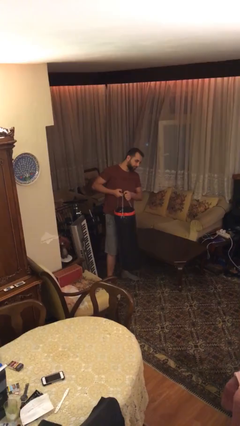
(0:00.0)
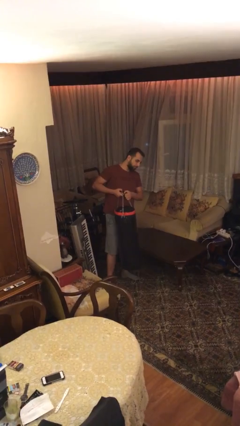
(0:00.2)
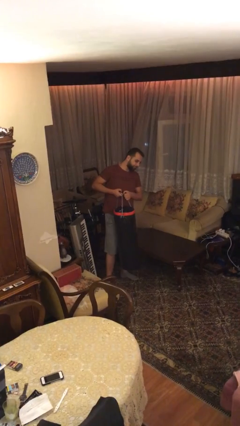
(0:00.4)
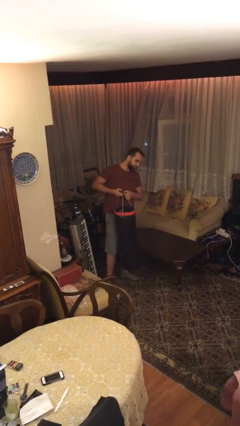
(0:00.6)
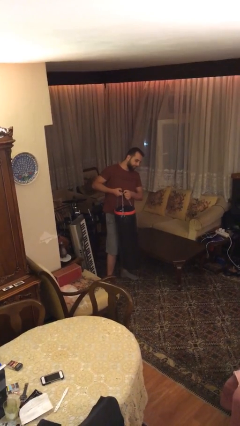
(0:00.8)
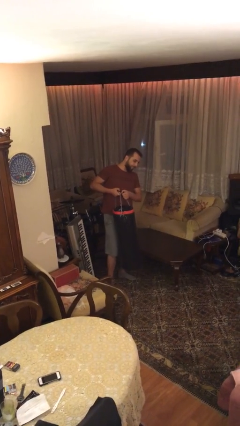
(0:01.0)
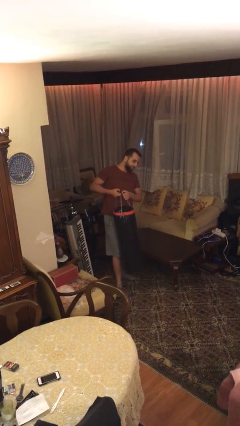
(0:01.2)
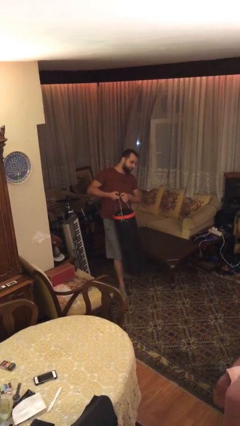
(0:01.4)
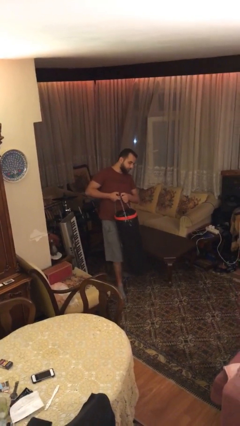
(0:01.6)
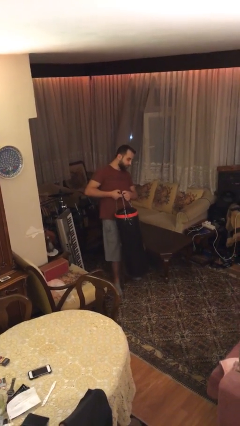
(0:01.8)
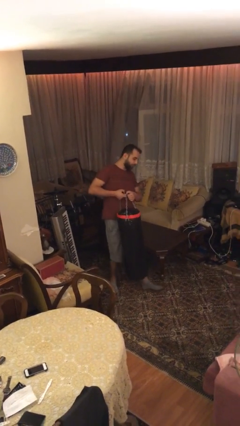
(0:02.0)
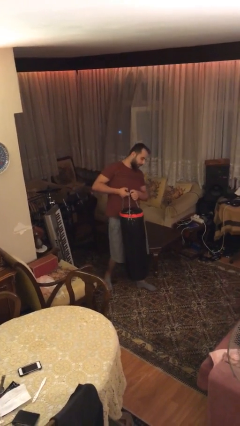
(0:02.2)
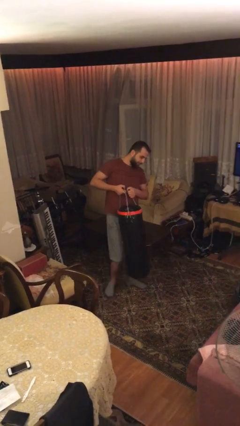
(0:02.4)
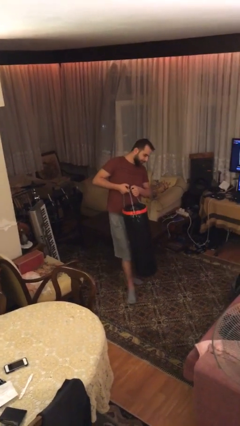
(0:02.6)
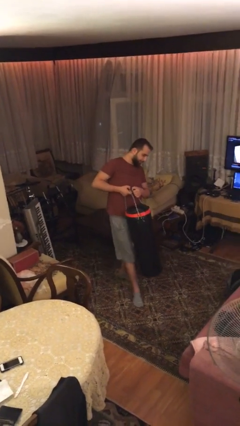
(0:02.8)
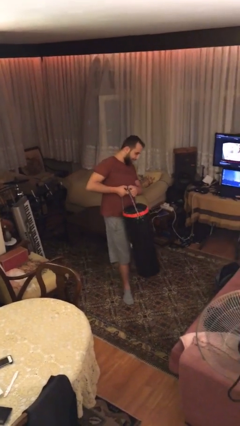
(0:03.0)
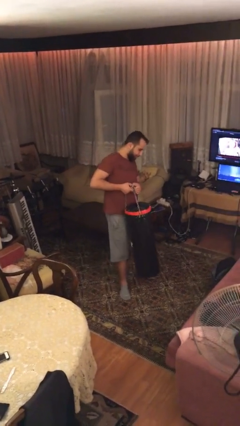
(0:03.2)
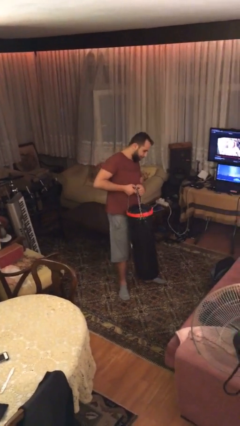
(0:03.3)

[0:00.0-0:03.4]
person carries heavy object

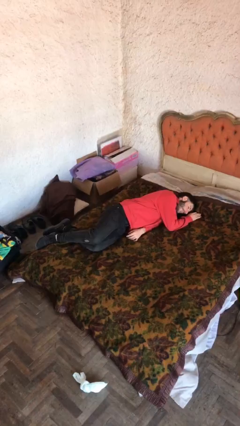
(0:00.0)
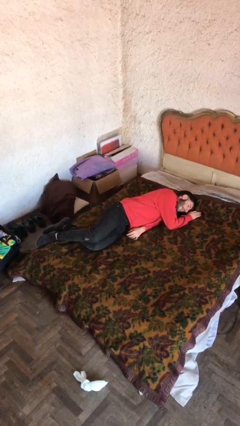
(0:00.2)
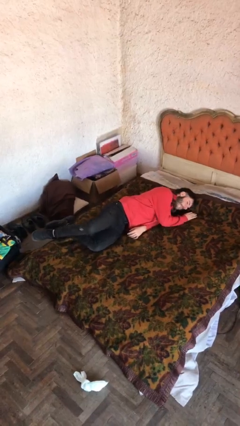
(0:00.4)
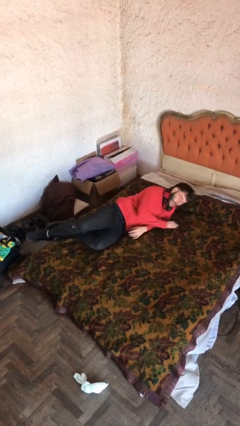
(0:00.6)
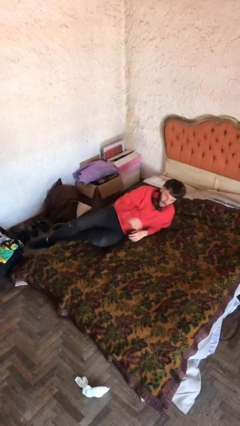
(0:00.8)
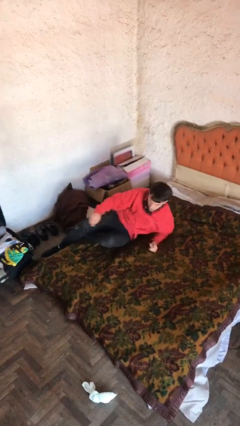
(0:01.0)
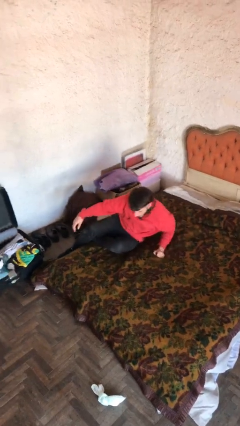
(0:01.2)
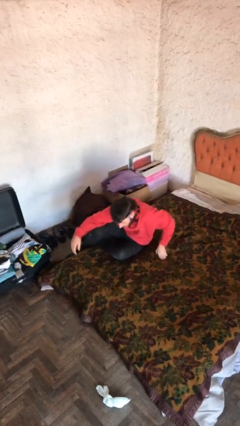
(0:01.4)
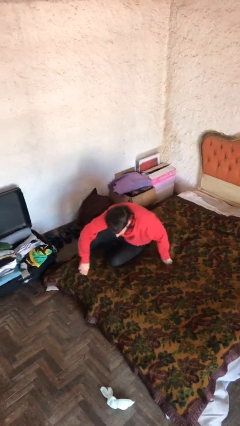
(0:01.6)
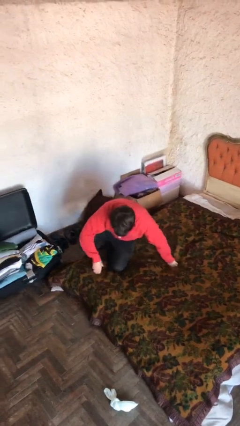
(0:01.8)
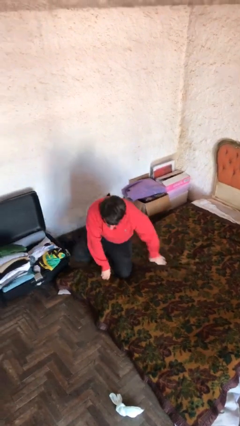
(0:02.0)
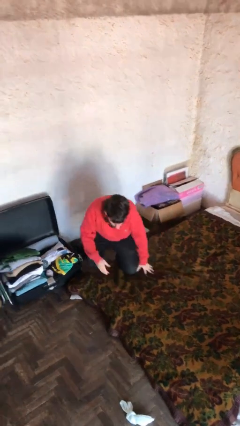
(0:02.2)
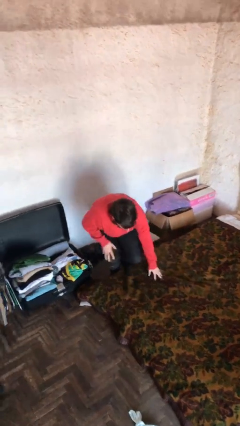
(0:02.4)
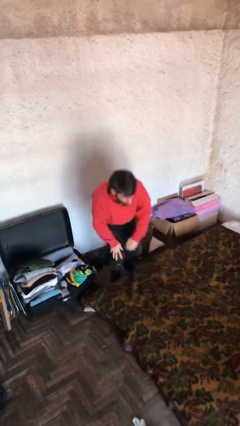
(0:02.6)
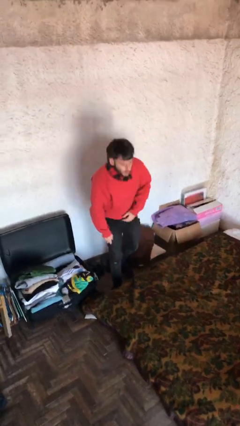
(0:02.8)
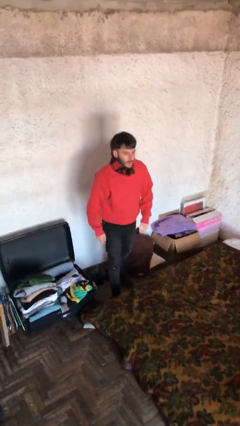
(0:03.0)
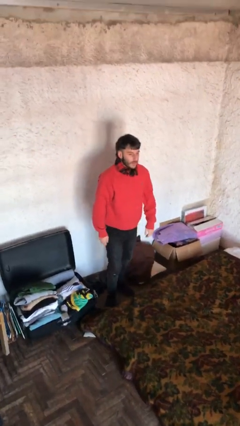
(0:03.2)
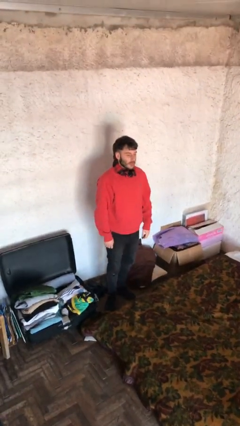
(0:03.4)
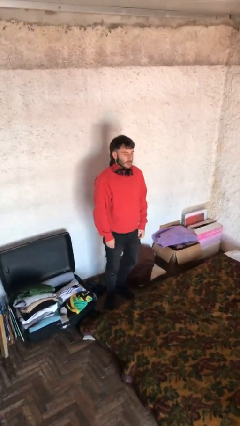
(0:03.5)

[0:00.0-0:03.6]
person stands up

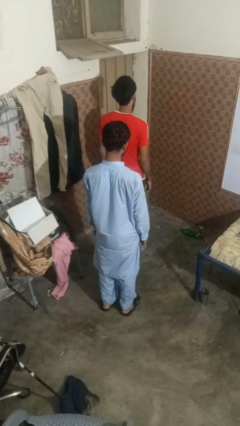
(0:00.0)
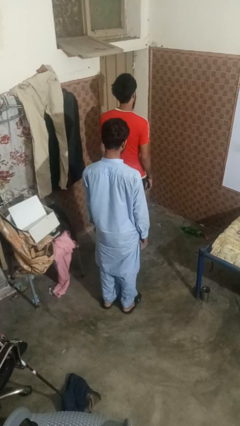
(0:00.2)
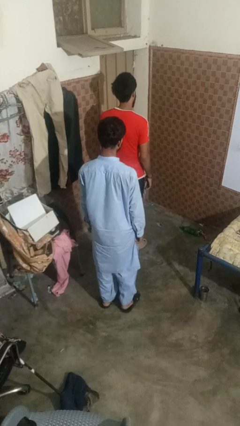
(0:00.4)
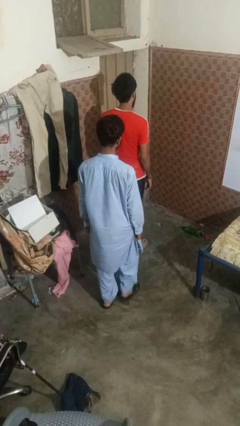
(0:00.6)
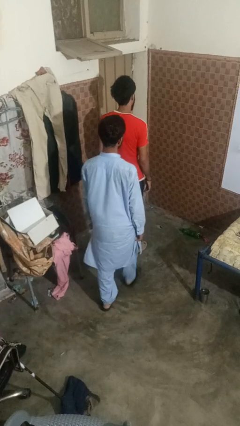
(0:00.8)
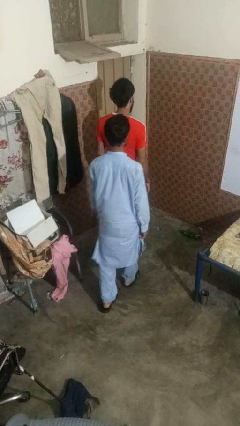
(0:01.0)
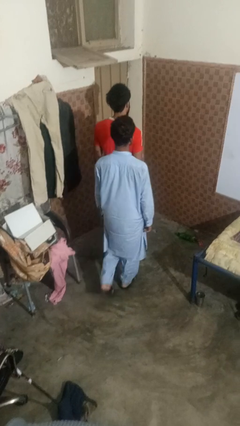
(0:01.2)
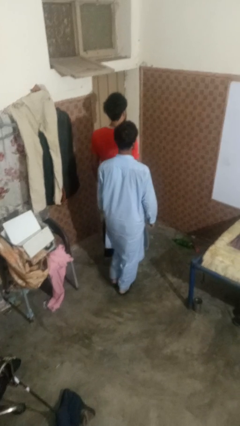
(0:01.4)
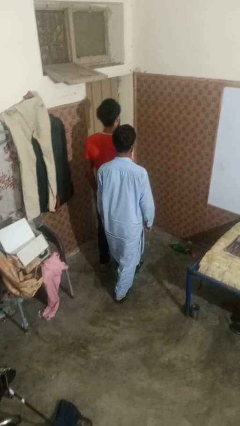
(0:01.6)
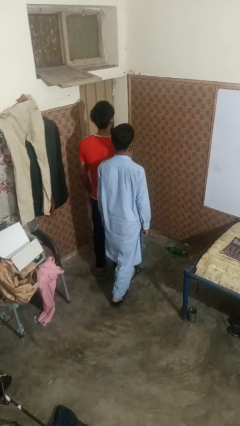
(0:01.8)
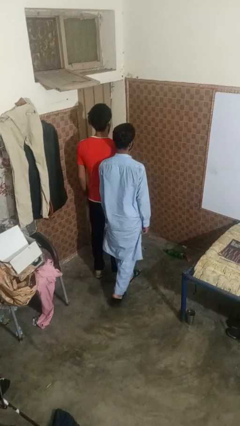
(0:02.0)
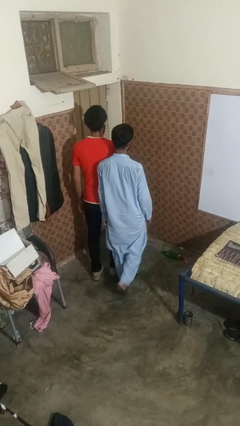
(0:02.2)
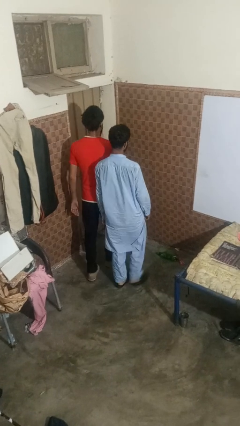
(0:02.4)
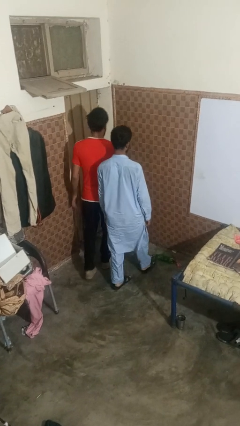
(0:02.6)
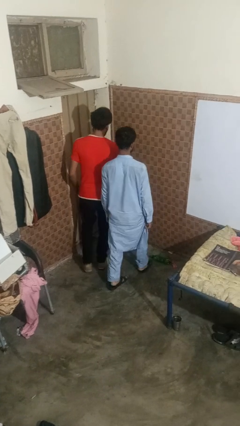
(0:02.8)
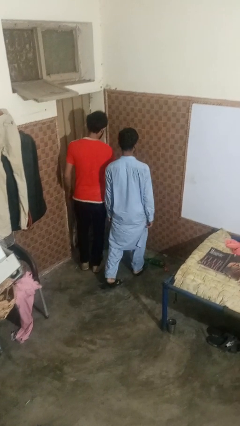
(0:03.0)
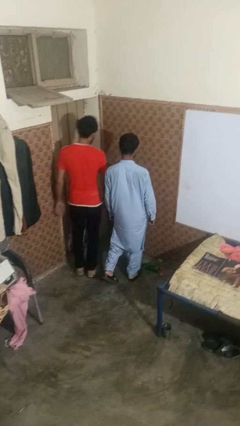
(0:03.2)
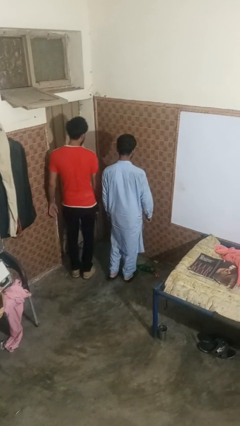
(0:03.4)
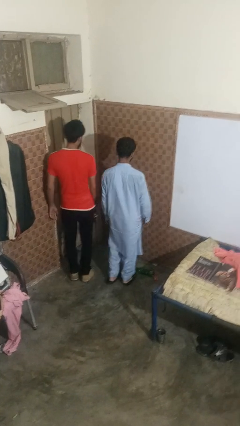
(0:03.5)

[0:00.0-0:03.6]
person bumps into person

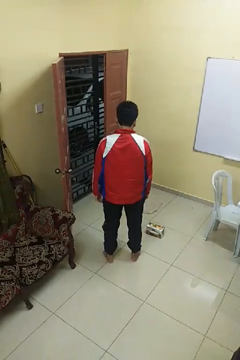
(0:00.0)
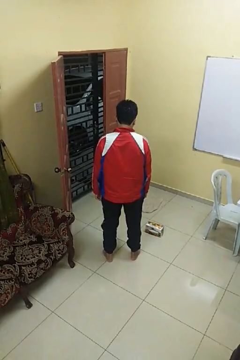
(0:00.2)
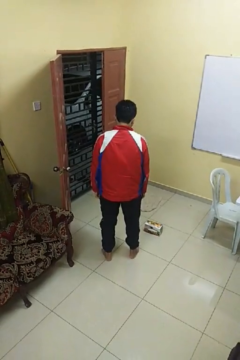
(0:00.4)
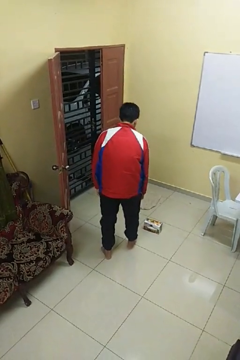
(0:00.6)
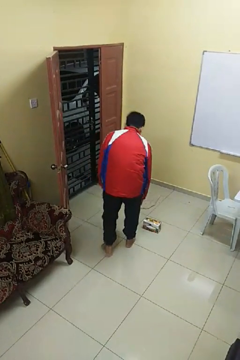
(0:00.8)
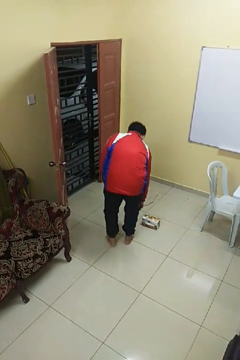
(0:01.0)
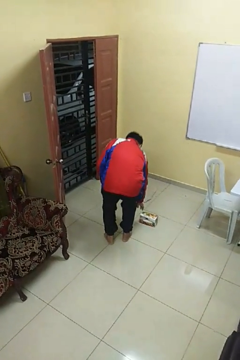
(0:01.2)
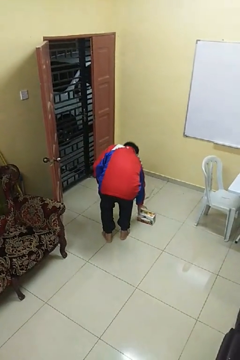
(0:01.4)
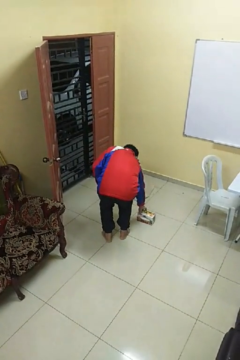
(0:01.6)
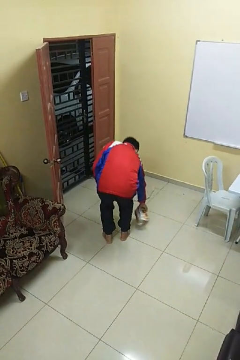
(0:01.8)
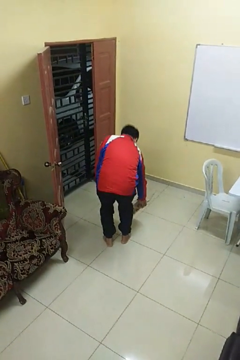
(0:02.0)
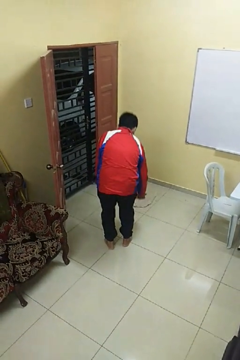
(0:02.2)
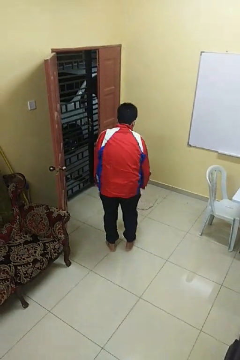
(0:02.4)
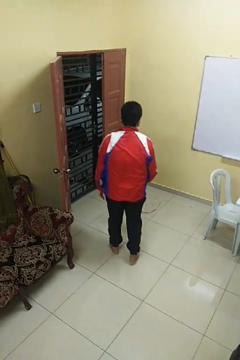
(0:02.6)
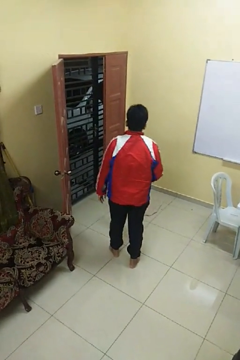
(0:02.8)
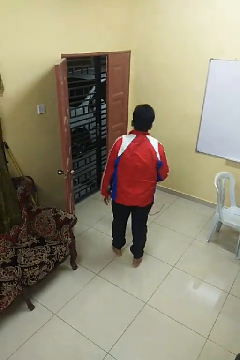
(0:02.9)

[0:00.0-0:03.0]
person picks up object from floor

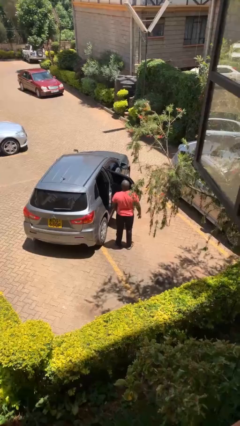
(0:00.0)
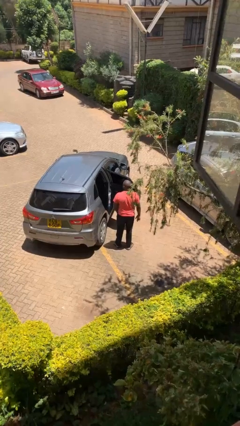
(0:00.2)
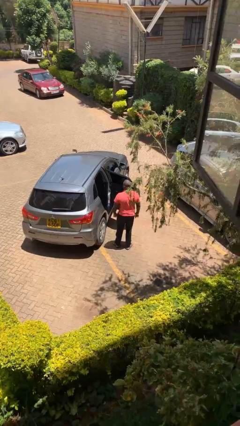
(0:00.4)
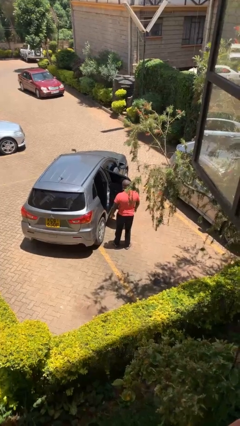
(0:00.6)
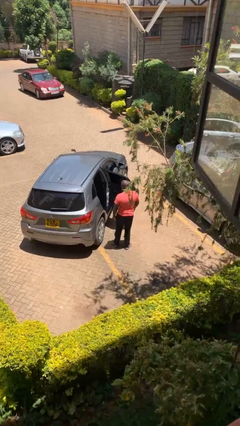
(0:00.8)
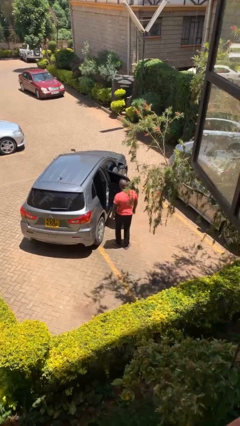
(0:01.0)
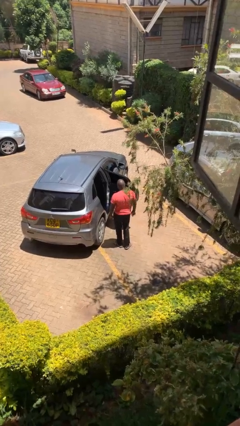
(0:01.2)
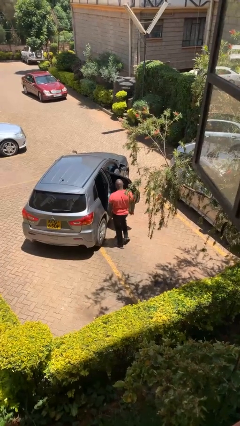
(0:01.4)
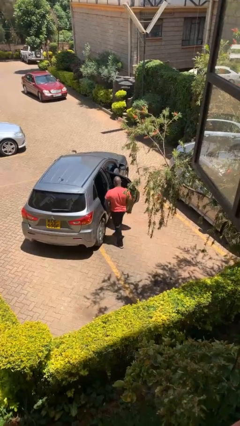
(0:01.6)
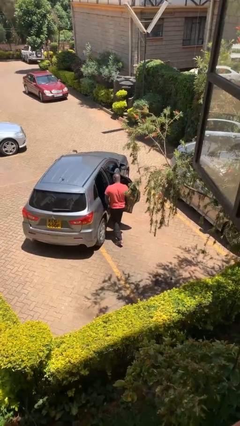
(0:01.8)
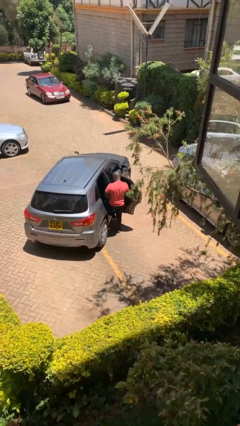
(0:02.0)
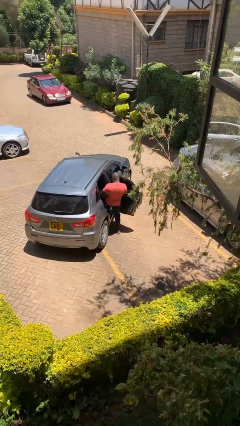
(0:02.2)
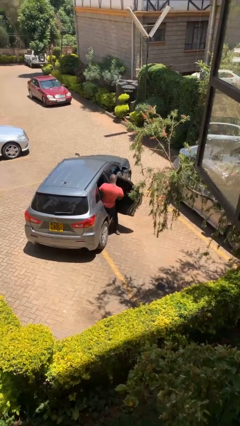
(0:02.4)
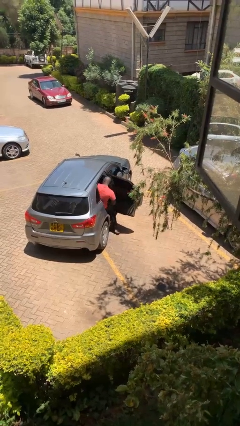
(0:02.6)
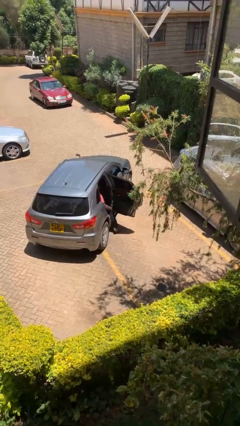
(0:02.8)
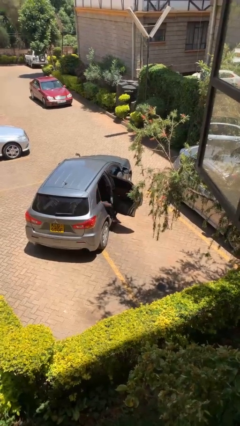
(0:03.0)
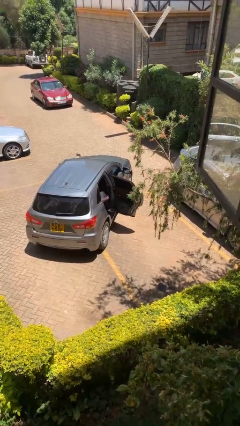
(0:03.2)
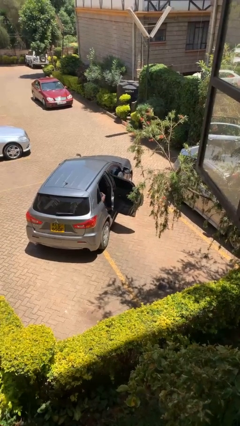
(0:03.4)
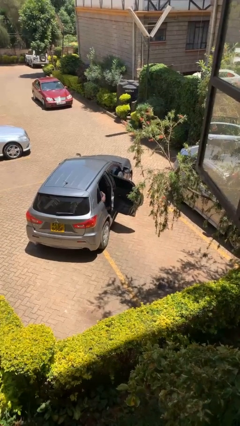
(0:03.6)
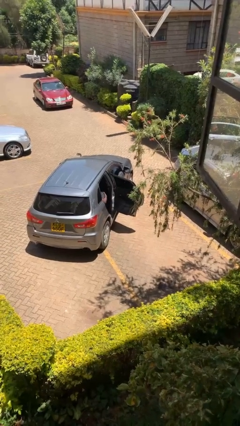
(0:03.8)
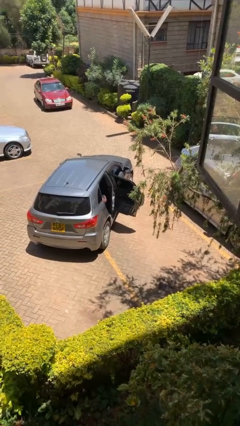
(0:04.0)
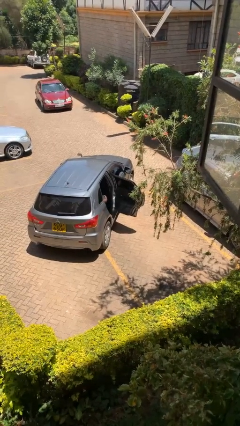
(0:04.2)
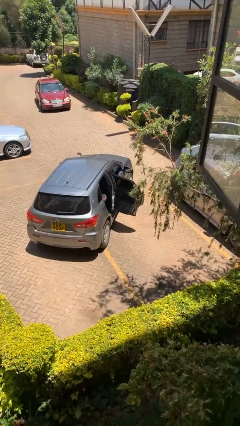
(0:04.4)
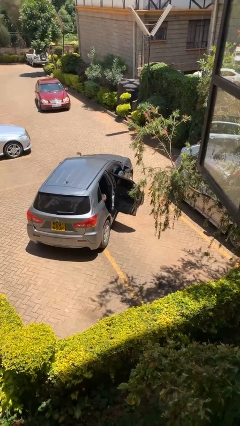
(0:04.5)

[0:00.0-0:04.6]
person enters car

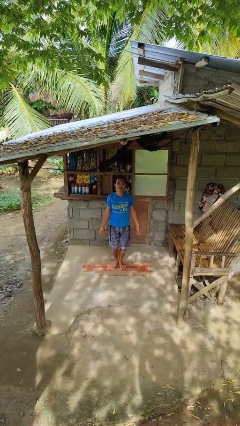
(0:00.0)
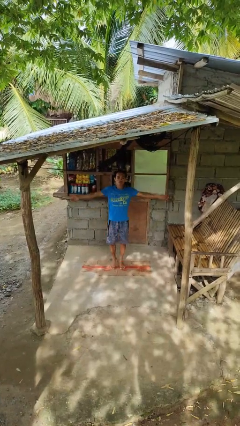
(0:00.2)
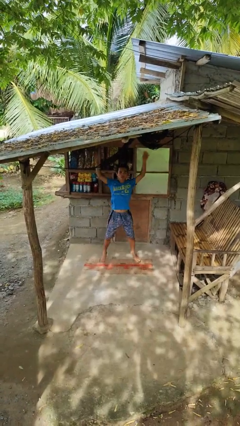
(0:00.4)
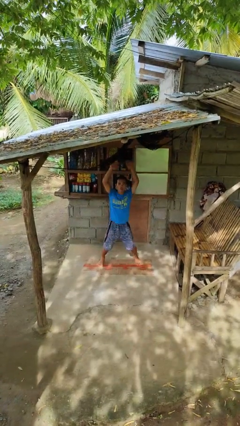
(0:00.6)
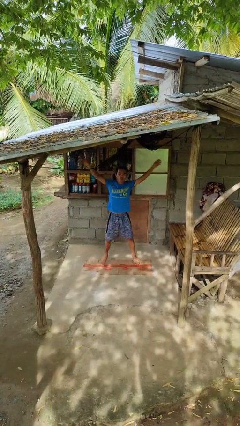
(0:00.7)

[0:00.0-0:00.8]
person exercises with jumping jacks
